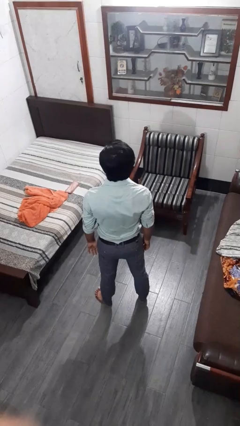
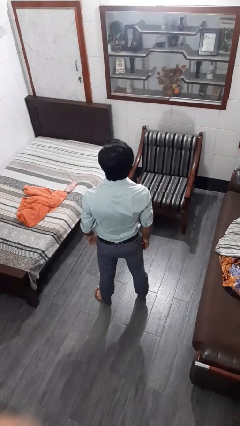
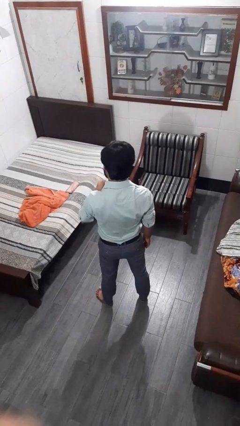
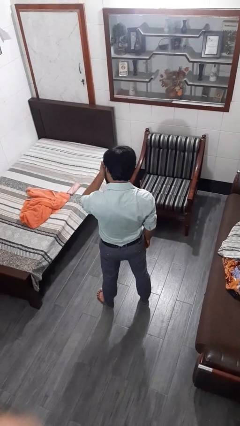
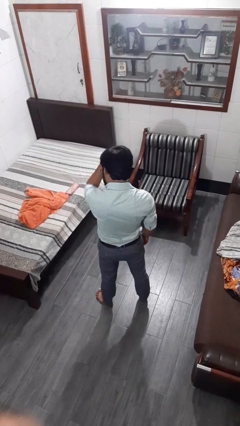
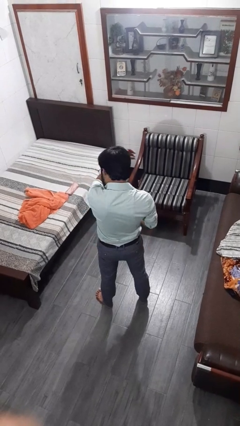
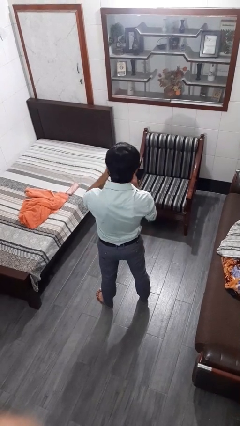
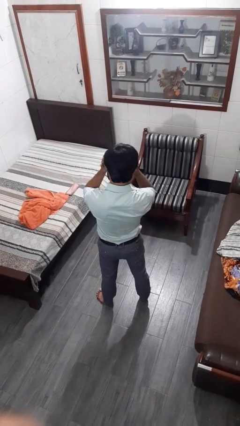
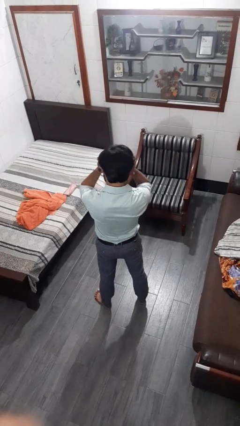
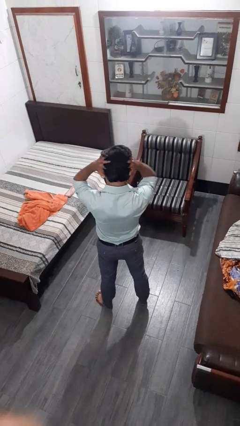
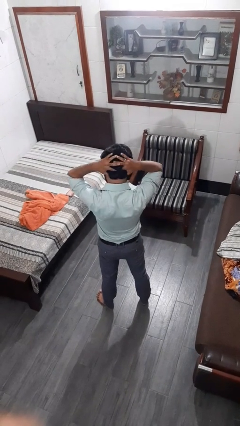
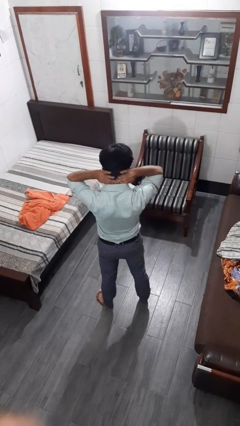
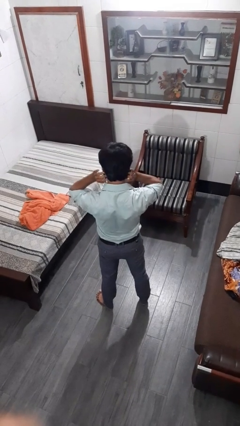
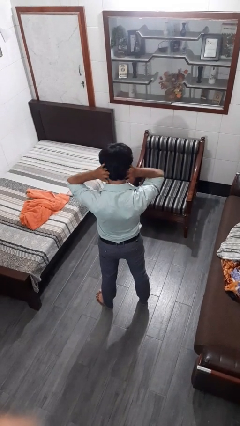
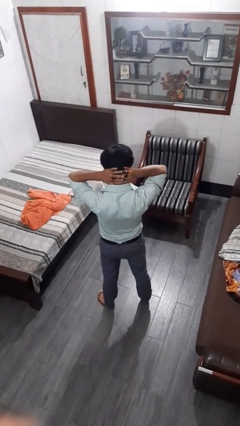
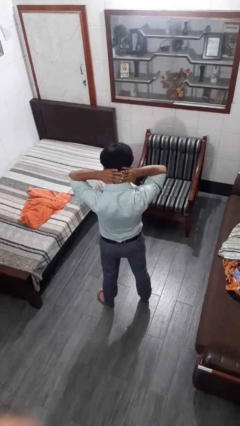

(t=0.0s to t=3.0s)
person strokes hair

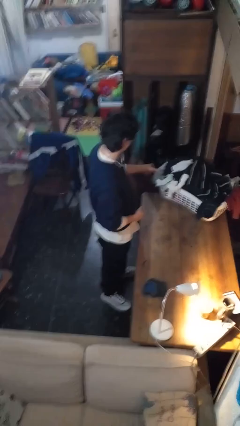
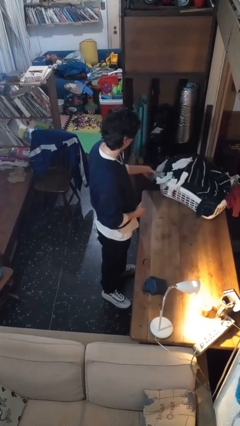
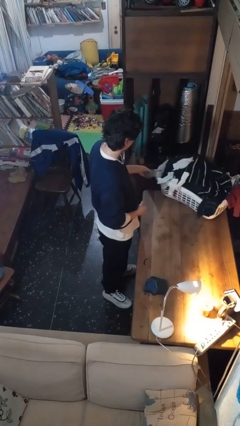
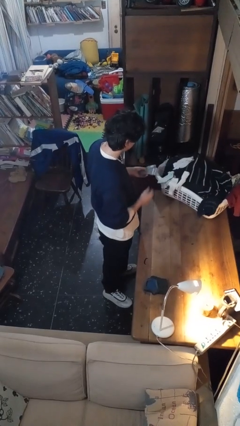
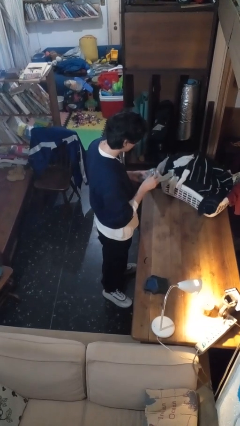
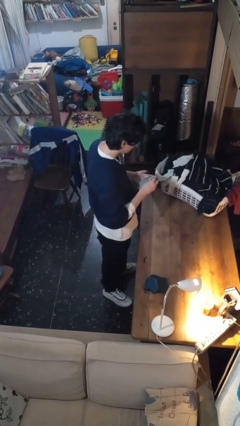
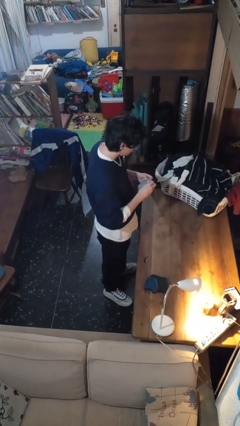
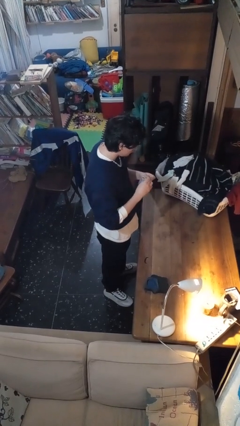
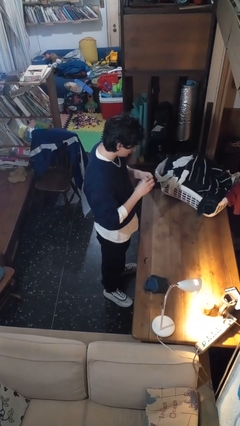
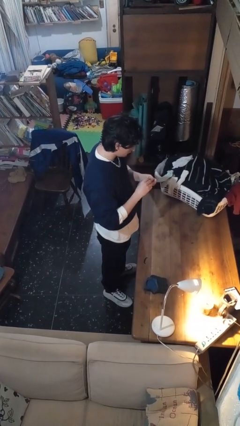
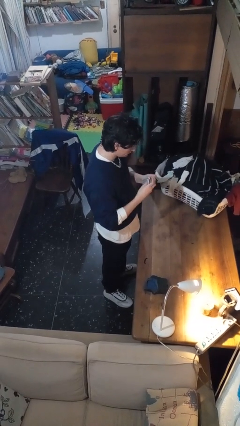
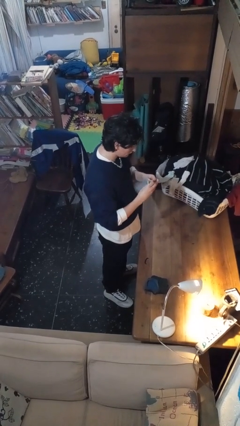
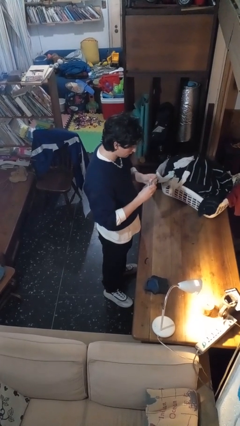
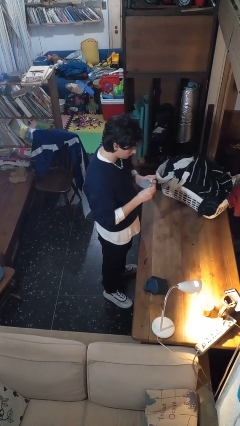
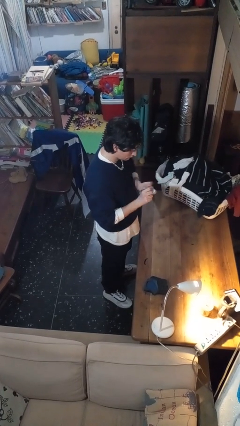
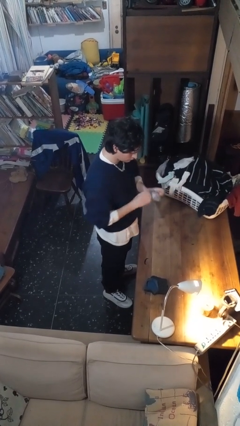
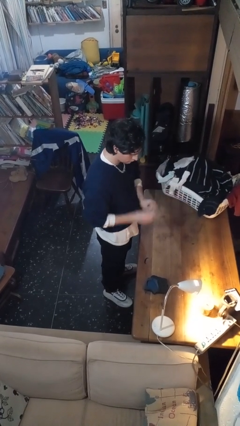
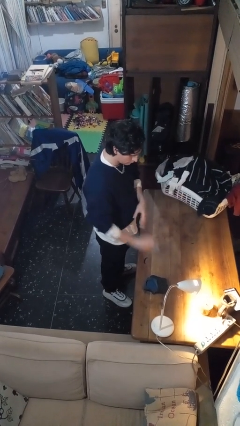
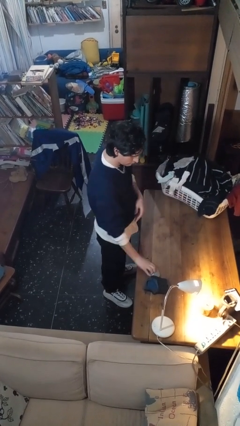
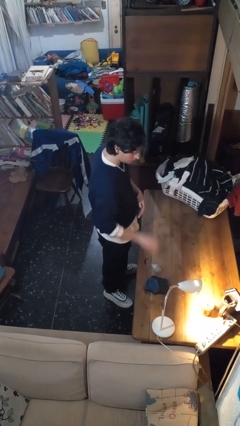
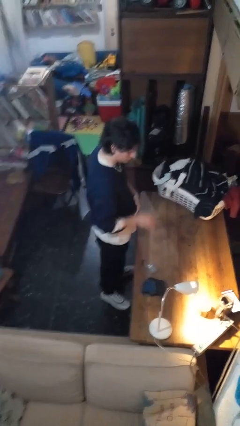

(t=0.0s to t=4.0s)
person folds socks

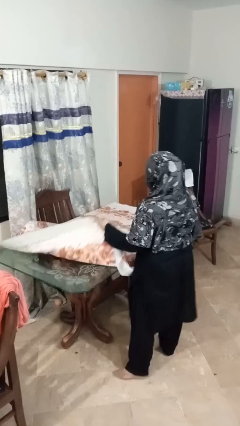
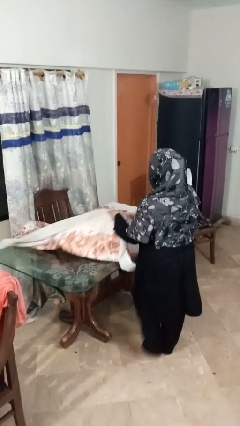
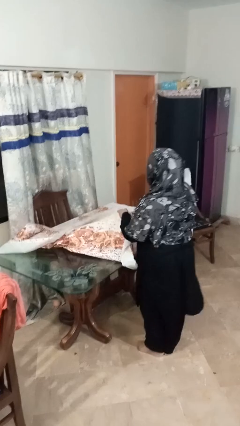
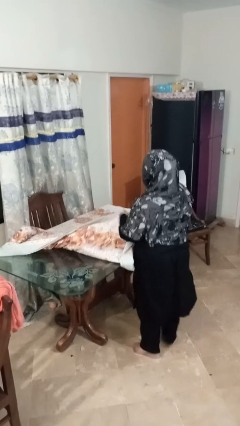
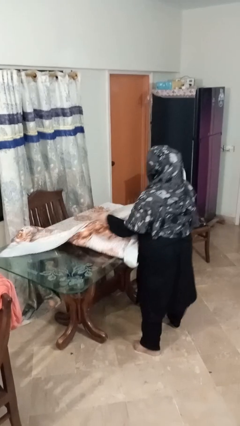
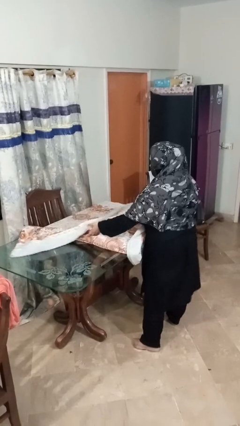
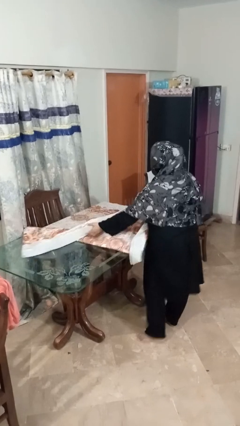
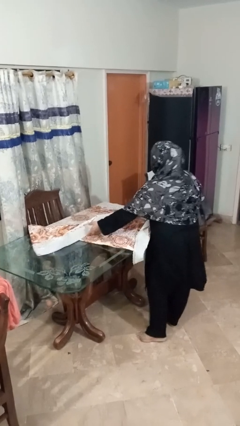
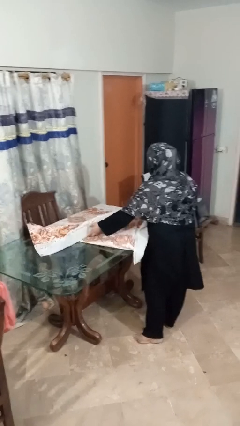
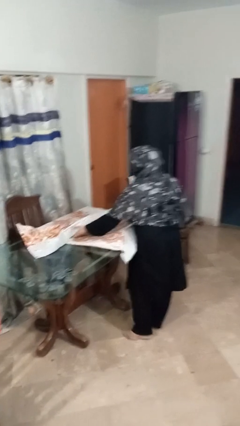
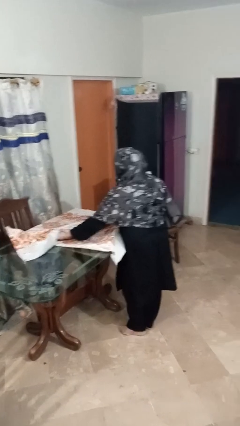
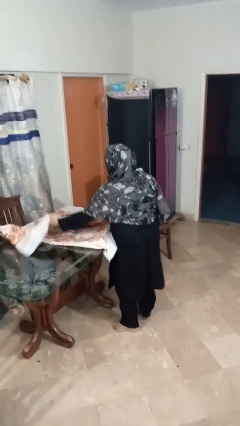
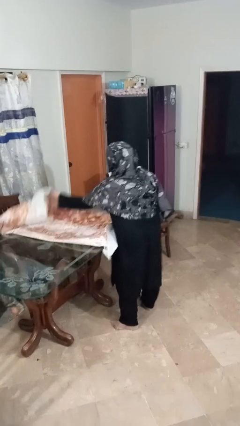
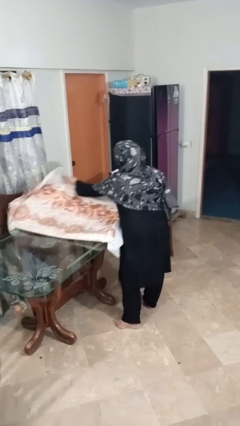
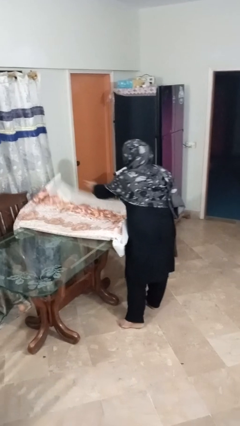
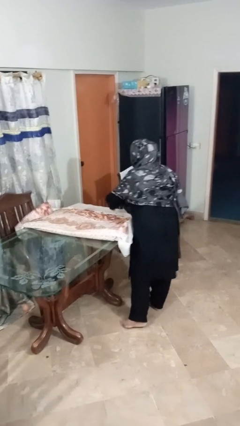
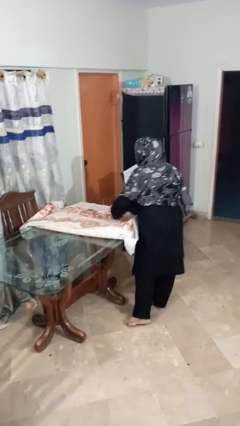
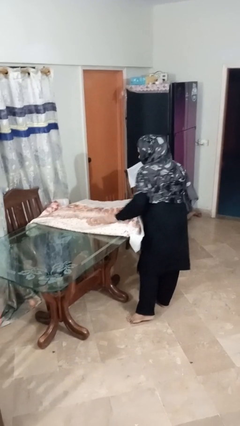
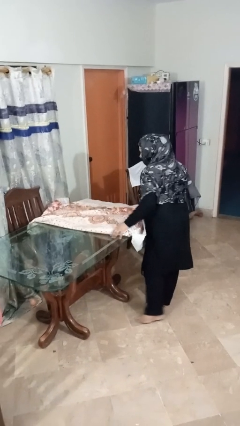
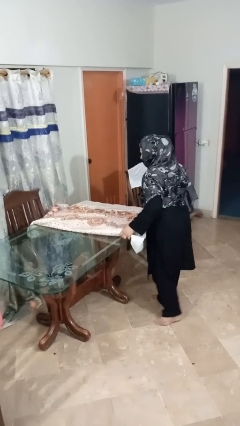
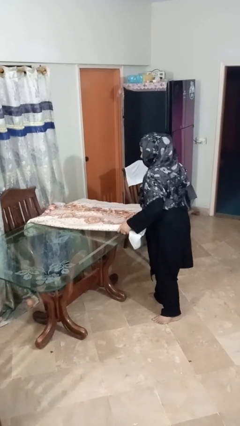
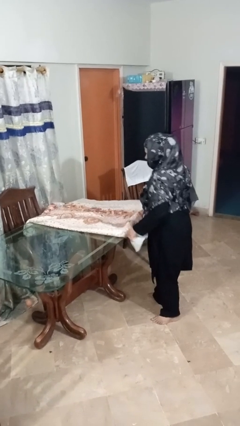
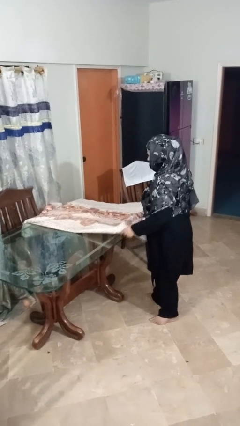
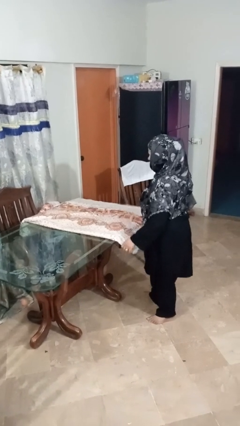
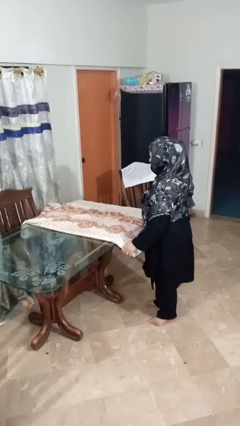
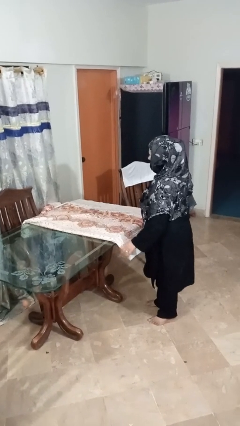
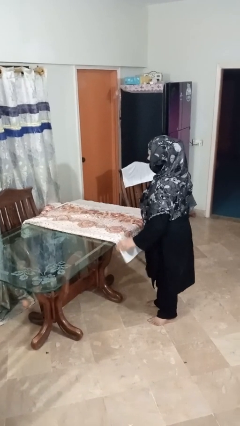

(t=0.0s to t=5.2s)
person folds tablecloth

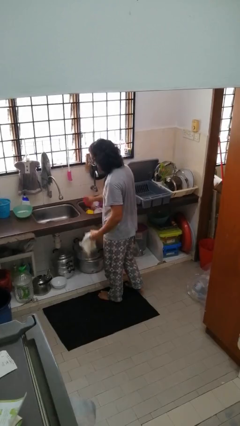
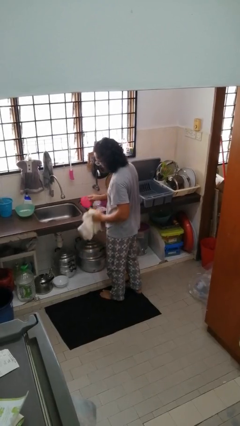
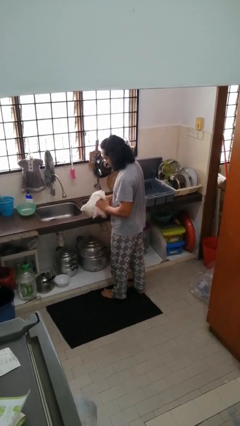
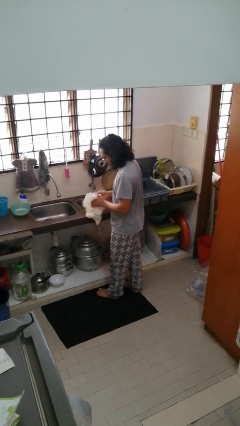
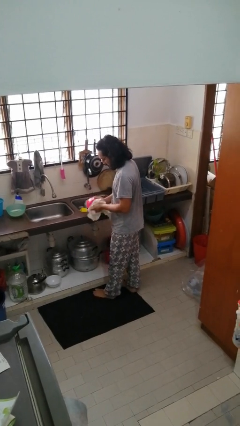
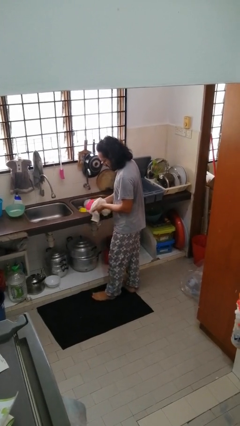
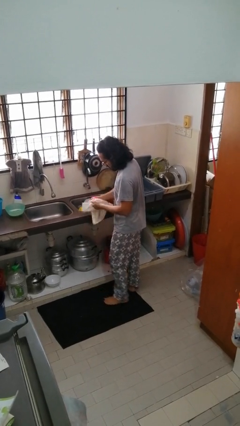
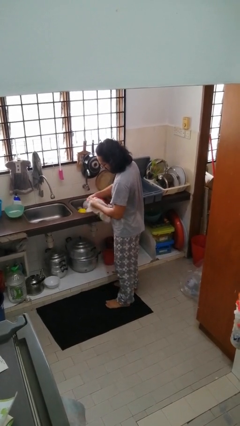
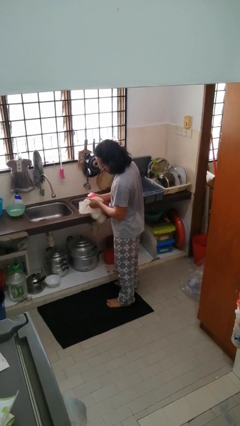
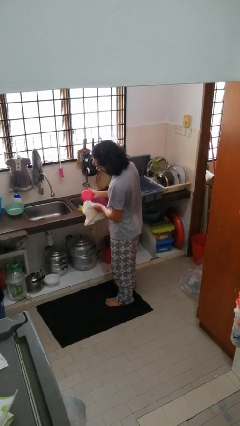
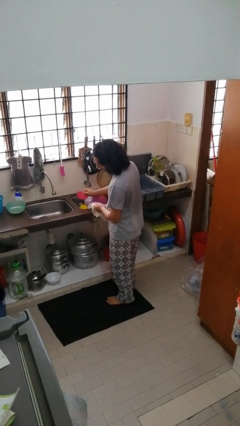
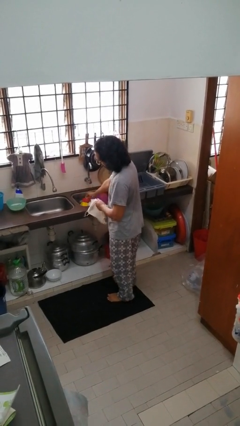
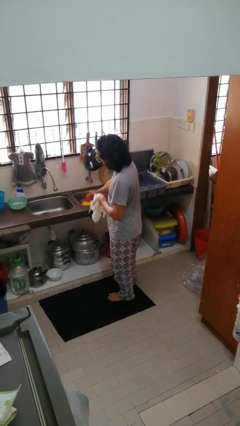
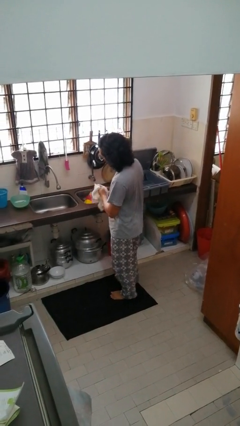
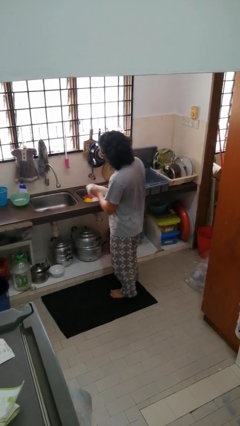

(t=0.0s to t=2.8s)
person dries dish

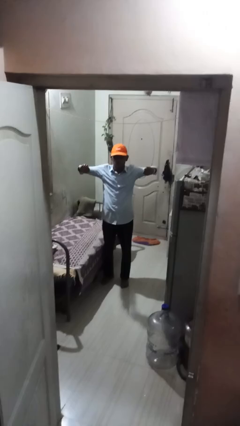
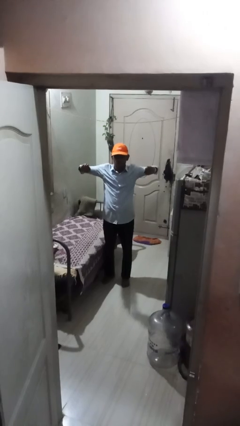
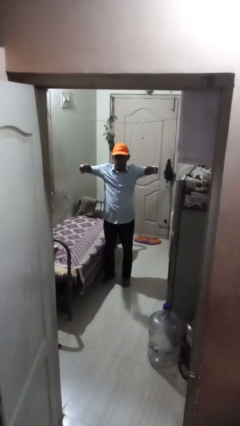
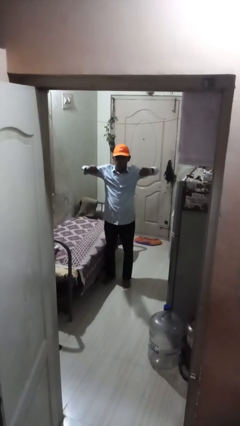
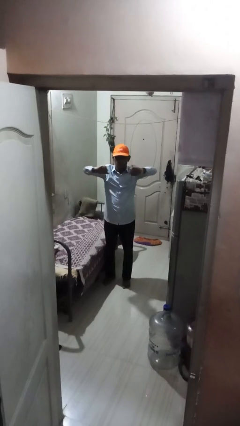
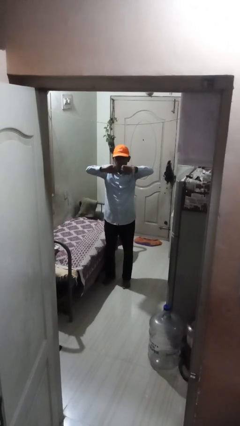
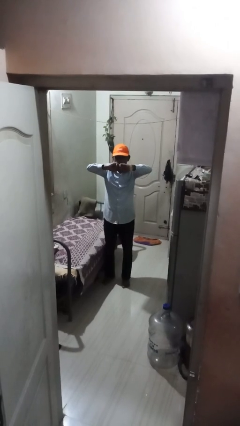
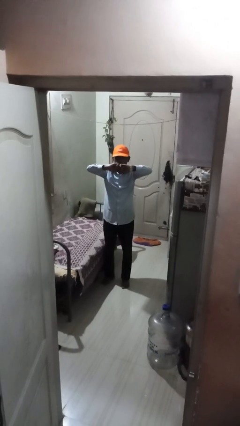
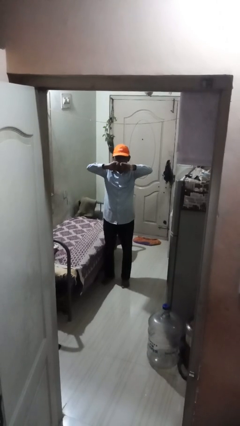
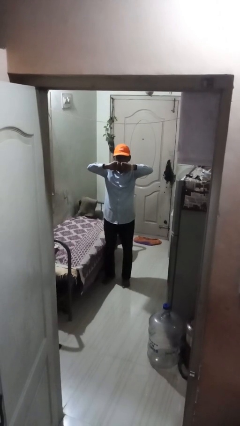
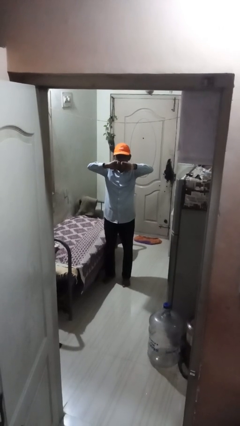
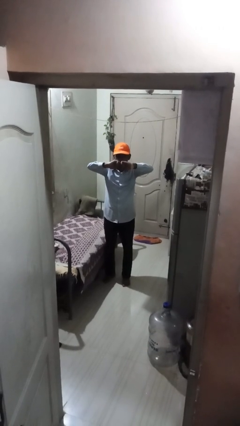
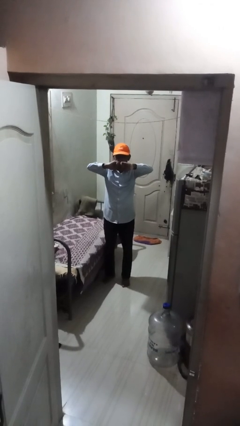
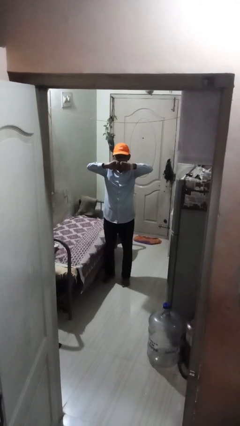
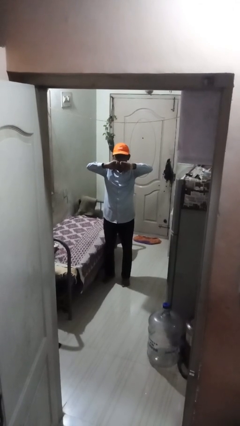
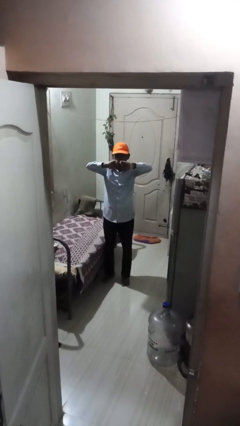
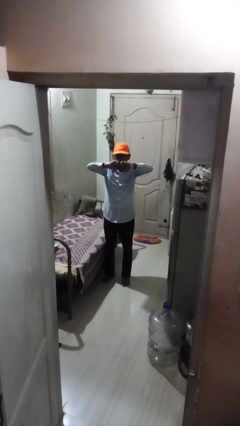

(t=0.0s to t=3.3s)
person gestures zoom in
